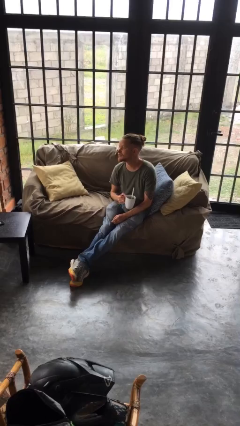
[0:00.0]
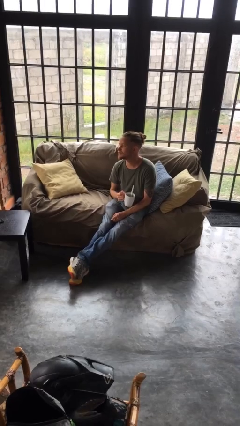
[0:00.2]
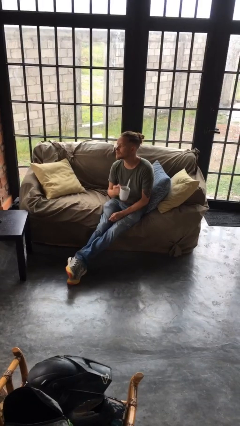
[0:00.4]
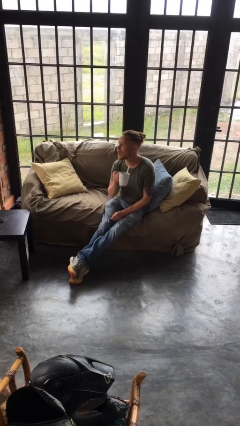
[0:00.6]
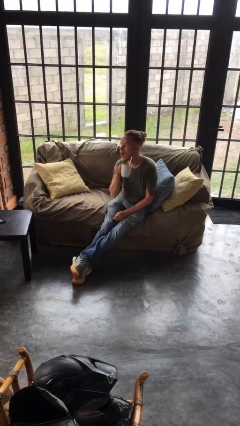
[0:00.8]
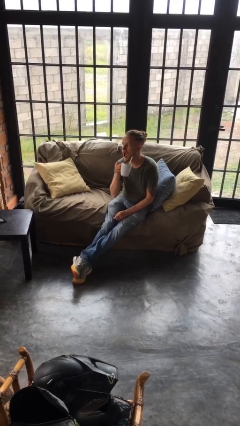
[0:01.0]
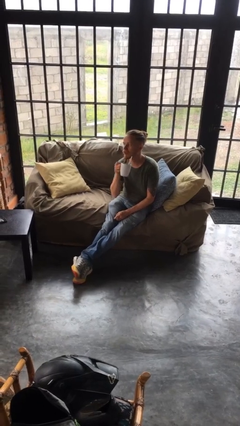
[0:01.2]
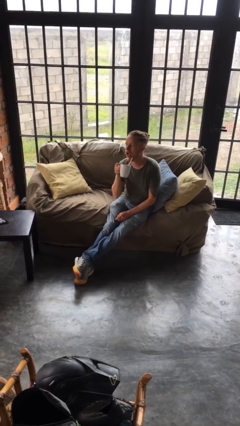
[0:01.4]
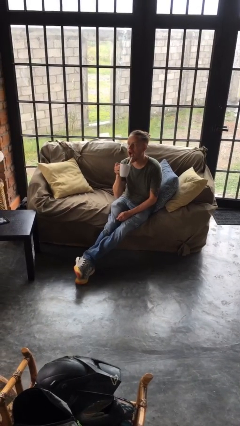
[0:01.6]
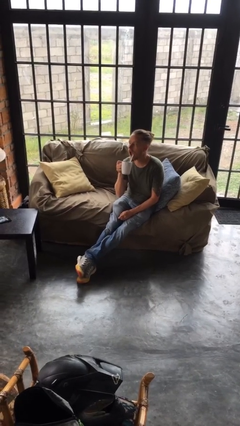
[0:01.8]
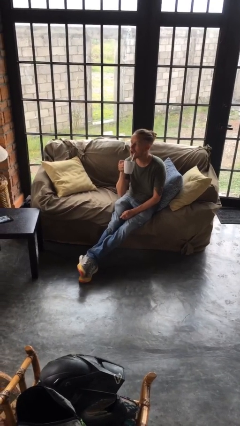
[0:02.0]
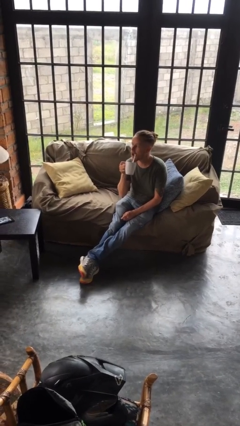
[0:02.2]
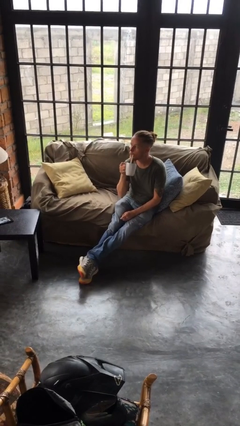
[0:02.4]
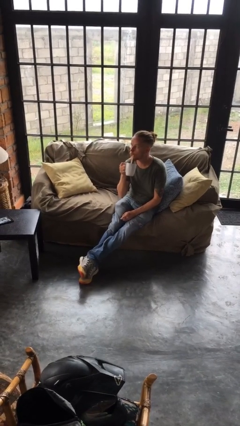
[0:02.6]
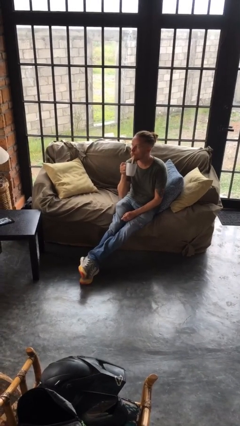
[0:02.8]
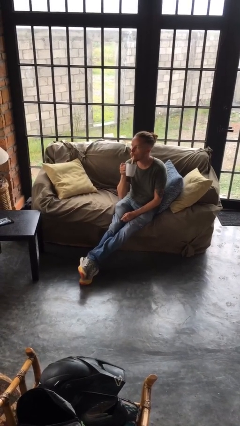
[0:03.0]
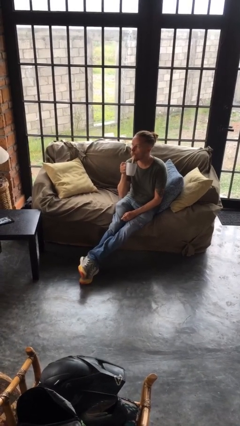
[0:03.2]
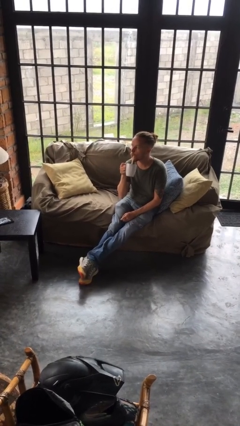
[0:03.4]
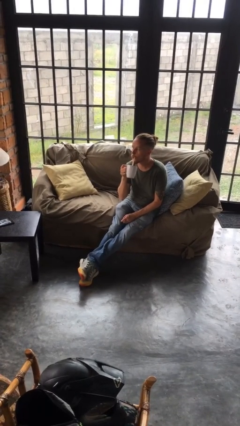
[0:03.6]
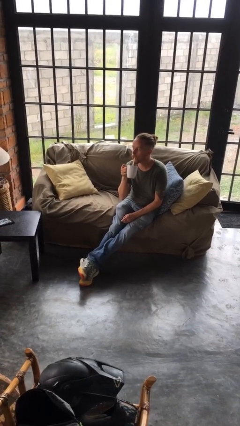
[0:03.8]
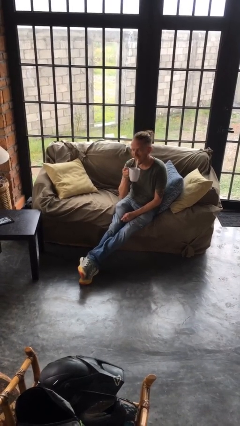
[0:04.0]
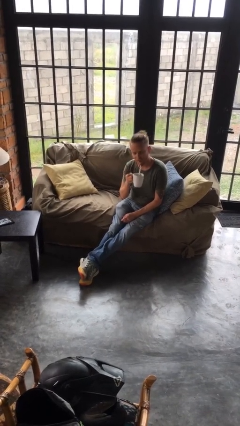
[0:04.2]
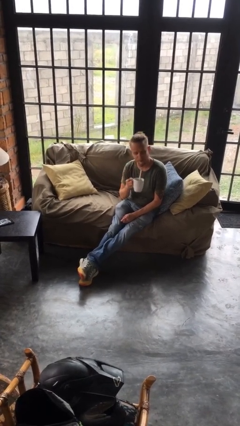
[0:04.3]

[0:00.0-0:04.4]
person drinks from straw

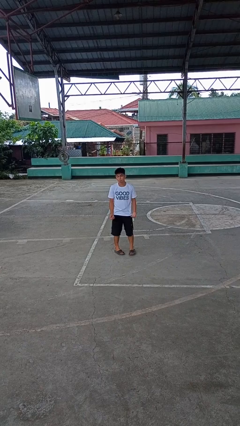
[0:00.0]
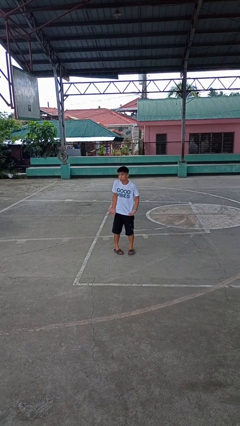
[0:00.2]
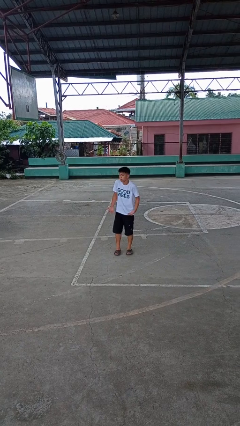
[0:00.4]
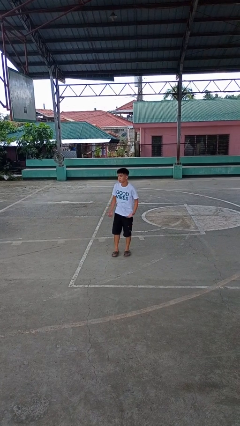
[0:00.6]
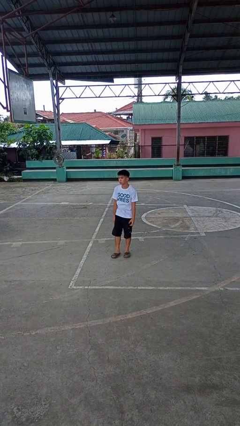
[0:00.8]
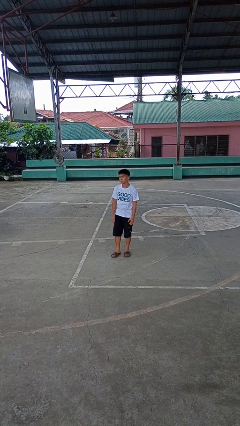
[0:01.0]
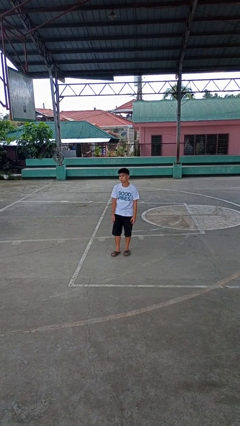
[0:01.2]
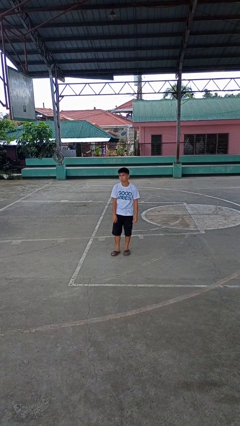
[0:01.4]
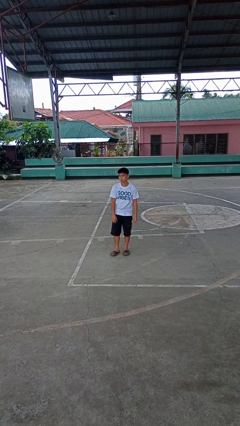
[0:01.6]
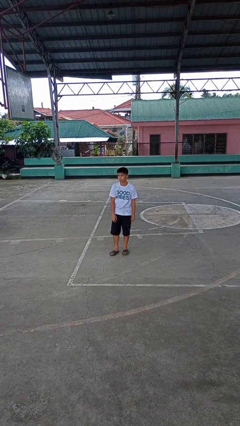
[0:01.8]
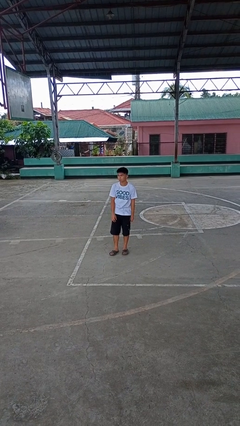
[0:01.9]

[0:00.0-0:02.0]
person shrugs

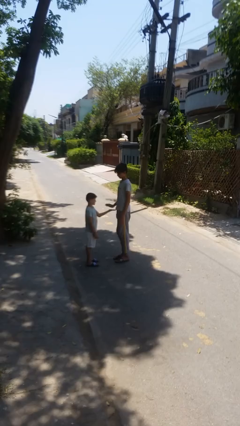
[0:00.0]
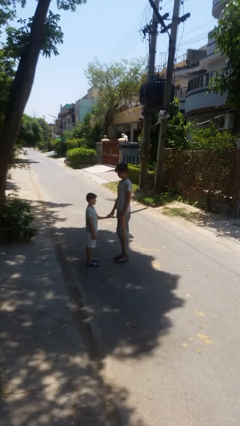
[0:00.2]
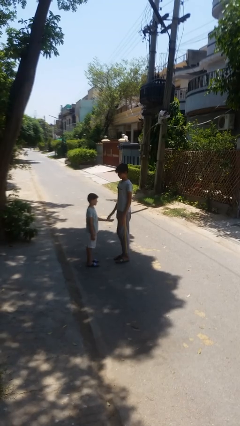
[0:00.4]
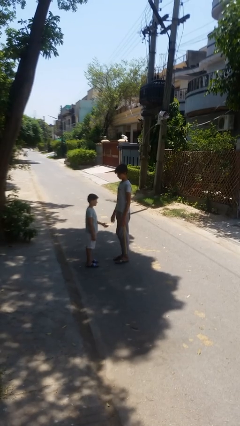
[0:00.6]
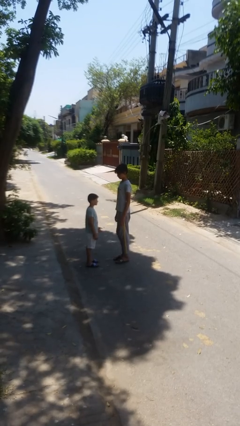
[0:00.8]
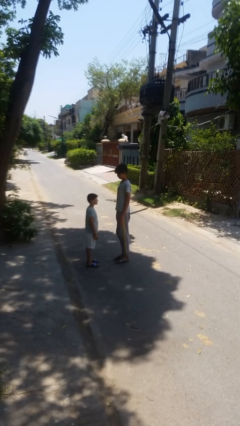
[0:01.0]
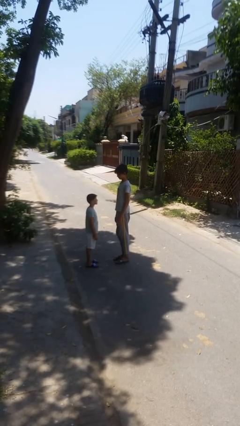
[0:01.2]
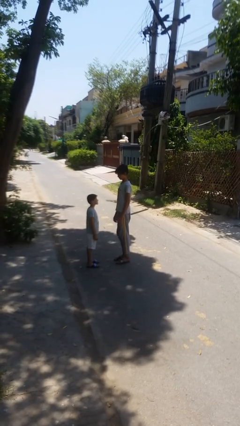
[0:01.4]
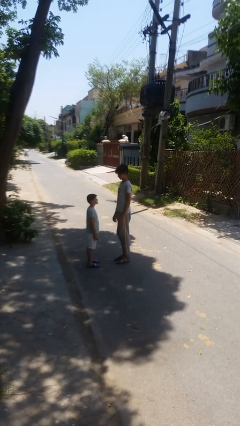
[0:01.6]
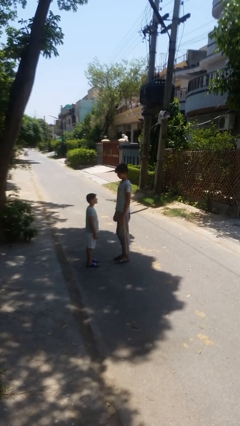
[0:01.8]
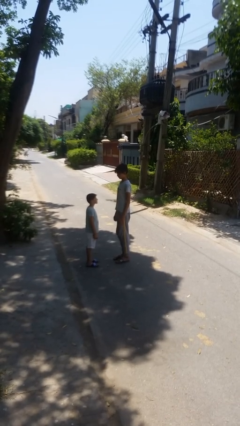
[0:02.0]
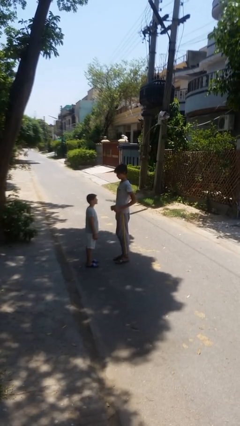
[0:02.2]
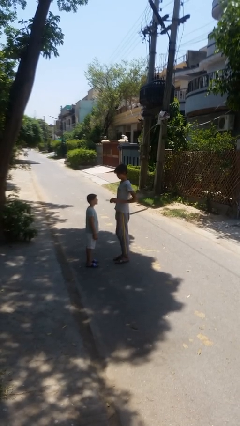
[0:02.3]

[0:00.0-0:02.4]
person highfives hand

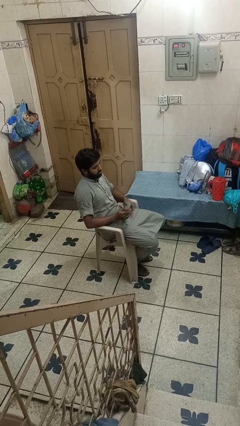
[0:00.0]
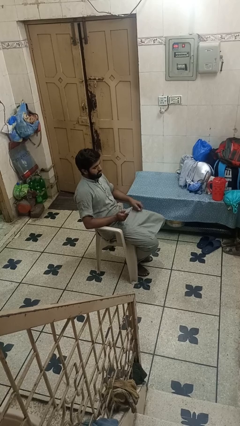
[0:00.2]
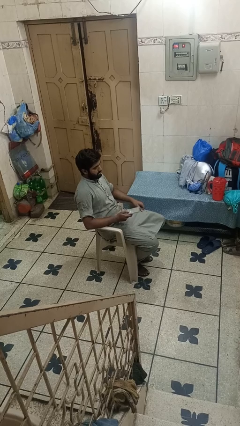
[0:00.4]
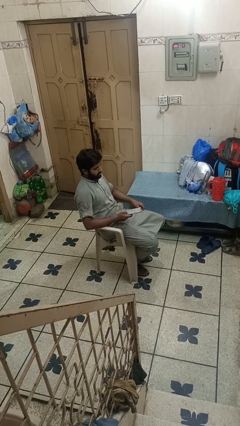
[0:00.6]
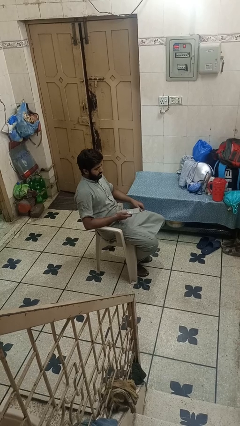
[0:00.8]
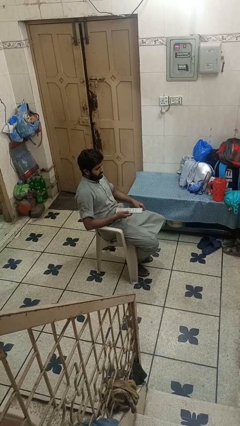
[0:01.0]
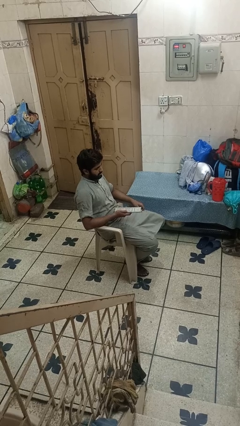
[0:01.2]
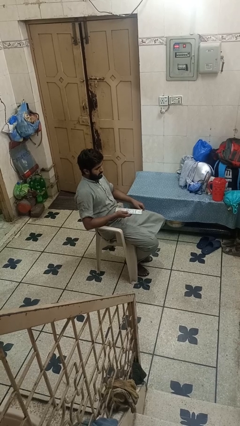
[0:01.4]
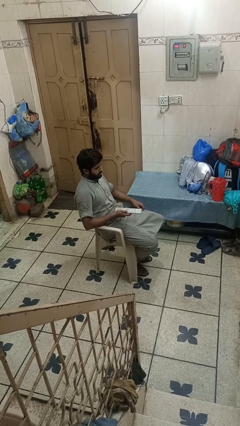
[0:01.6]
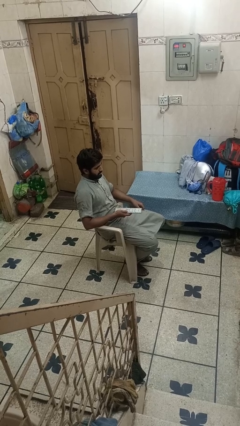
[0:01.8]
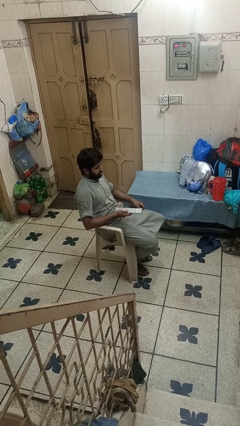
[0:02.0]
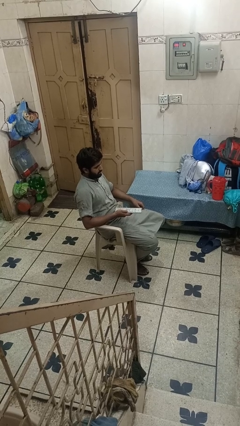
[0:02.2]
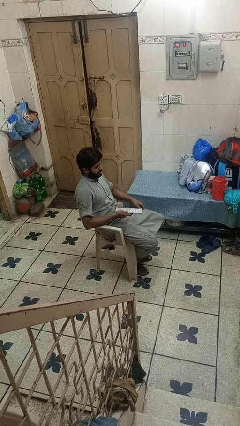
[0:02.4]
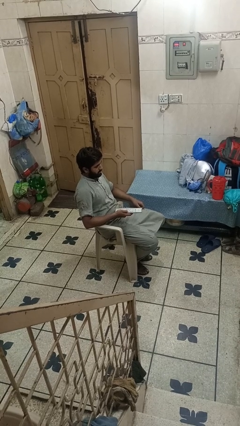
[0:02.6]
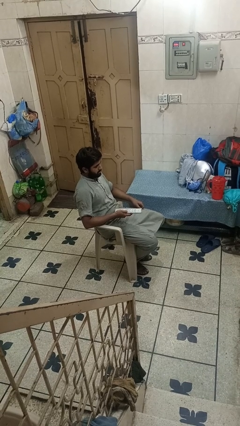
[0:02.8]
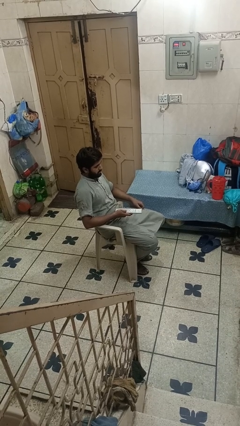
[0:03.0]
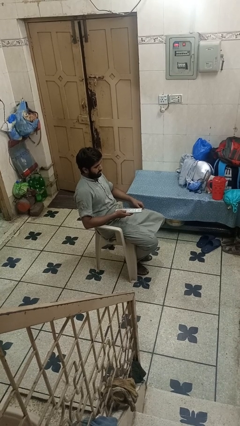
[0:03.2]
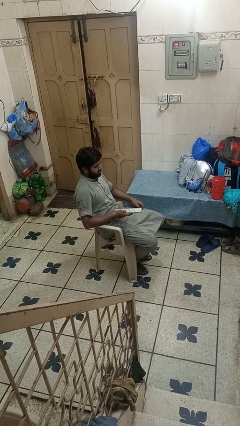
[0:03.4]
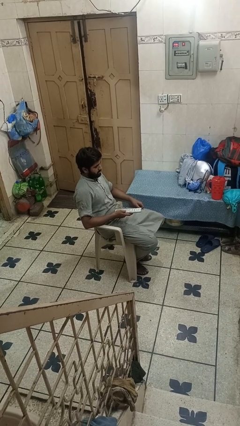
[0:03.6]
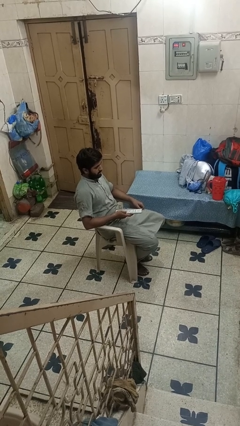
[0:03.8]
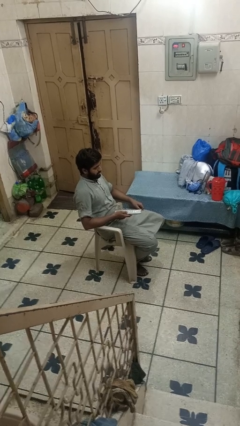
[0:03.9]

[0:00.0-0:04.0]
person uses television remote

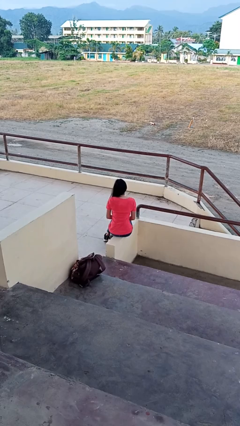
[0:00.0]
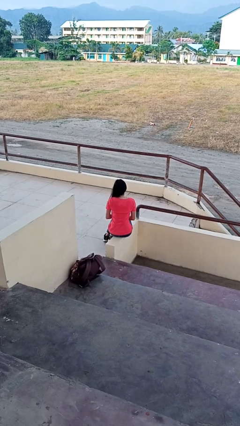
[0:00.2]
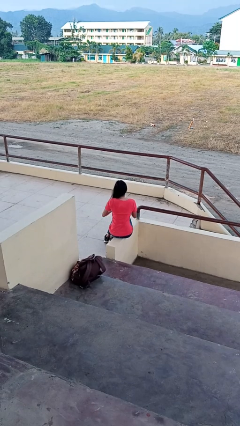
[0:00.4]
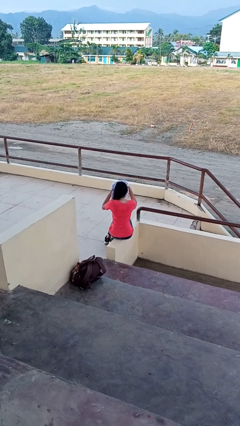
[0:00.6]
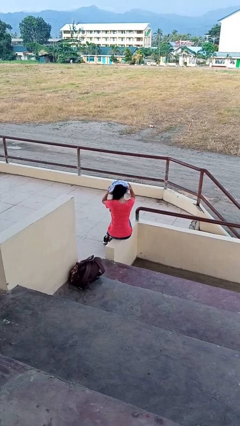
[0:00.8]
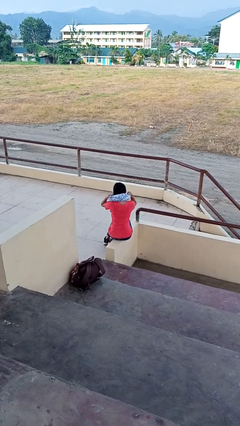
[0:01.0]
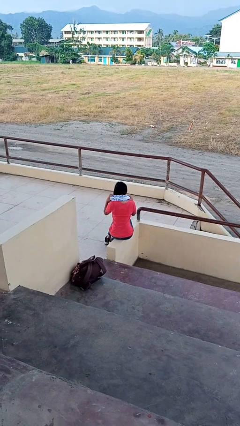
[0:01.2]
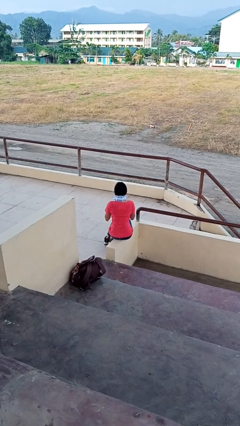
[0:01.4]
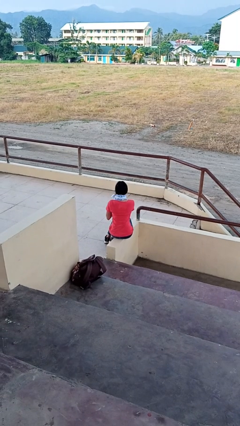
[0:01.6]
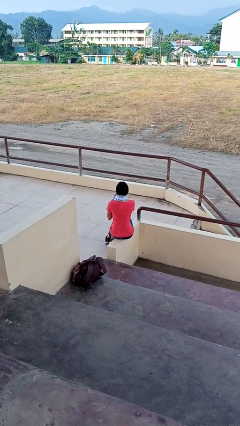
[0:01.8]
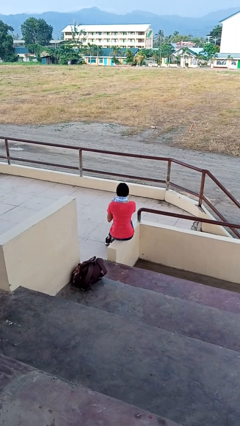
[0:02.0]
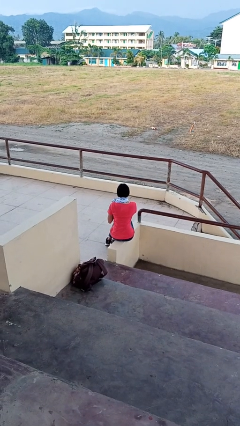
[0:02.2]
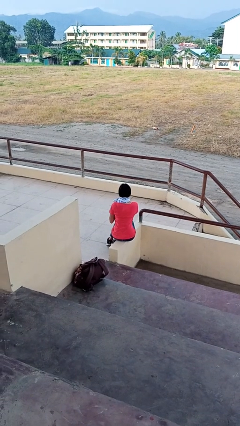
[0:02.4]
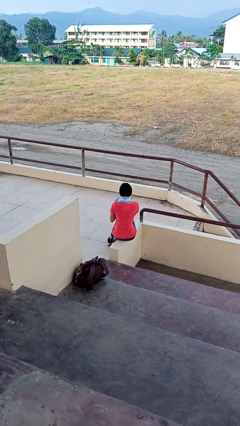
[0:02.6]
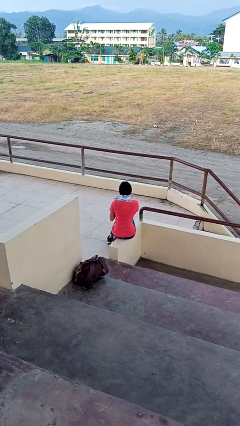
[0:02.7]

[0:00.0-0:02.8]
person puts on scarf

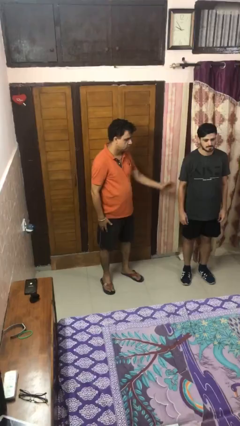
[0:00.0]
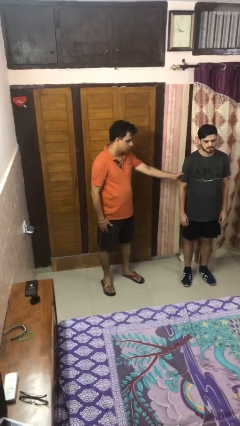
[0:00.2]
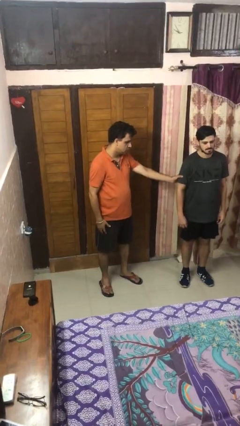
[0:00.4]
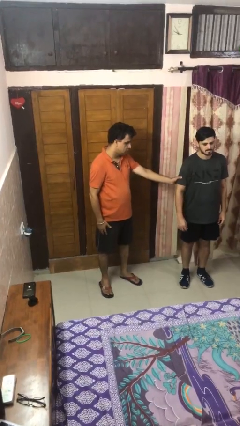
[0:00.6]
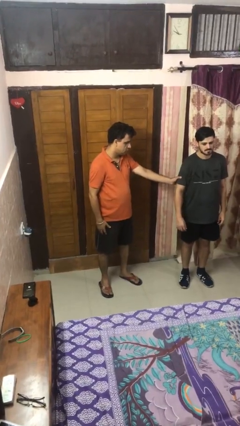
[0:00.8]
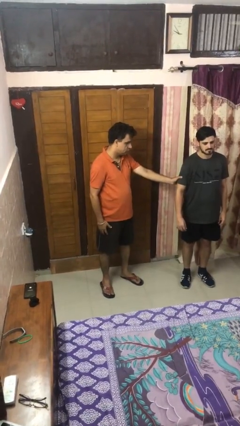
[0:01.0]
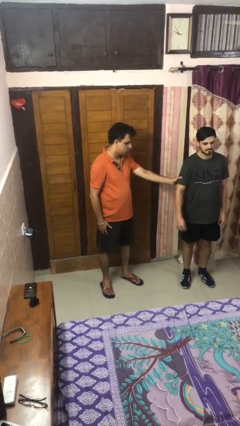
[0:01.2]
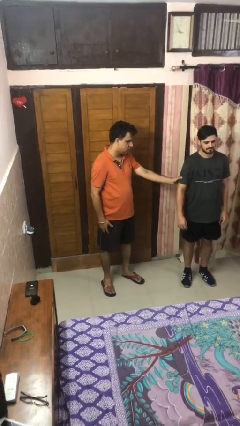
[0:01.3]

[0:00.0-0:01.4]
person grabs person by bicep

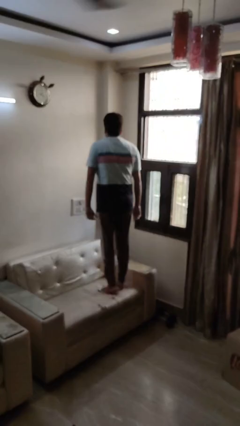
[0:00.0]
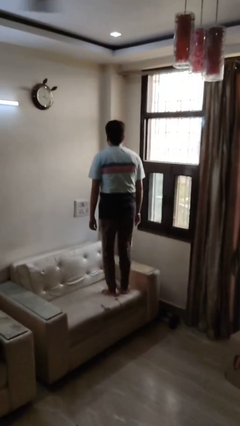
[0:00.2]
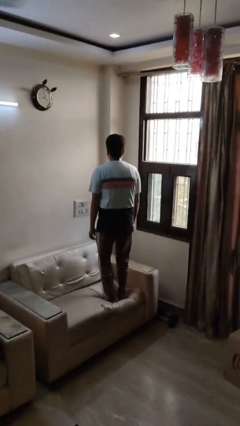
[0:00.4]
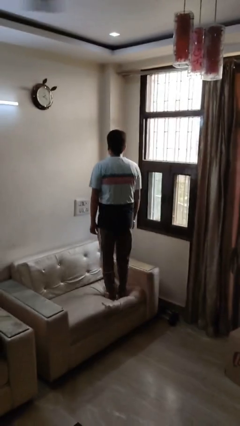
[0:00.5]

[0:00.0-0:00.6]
person jumps on couch
